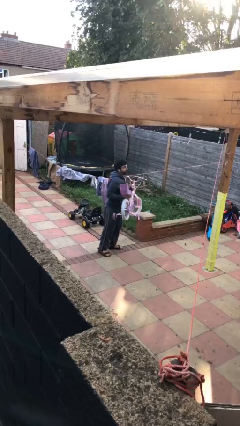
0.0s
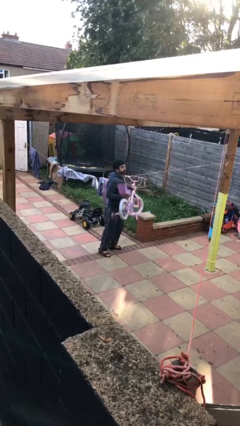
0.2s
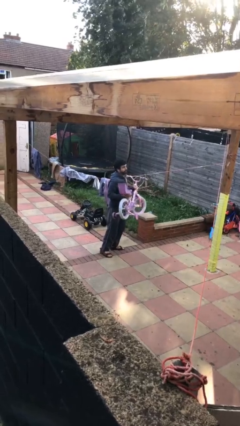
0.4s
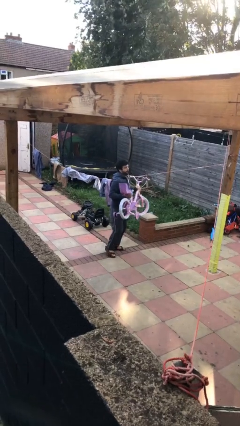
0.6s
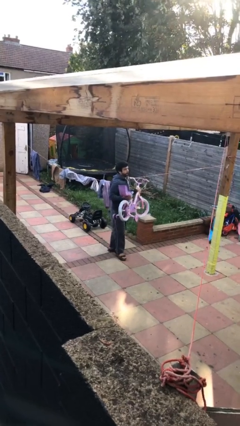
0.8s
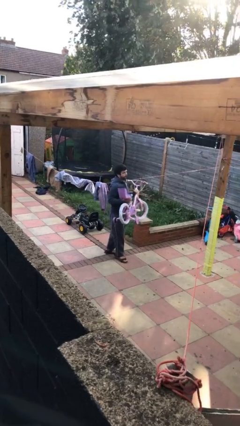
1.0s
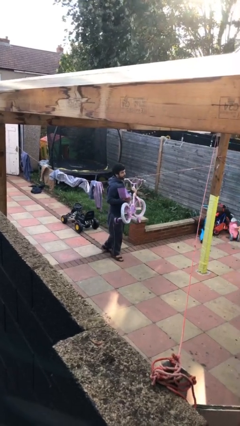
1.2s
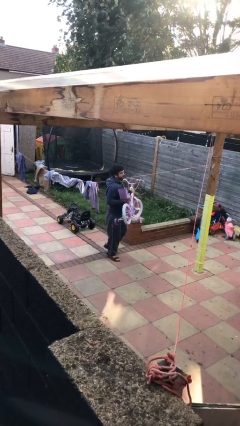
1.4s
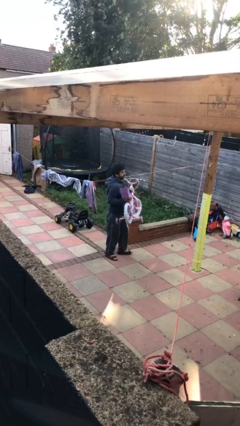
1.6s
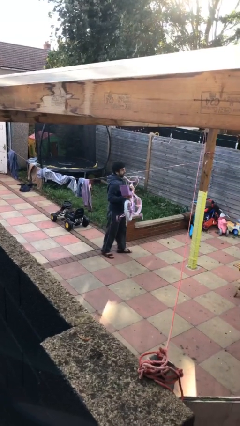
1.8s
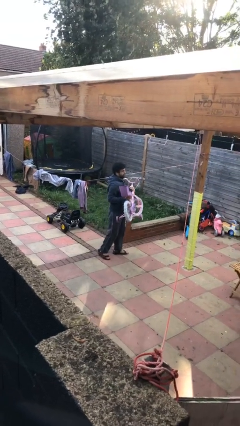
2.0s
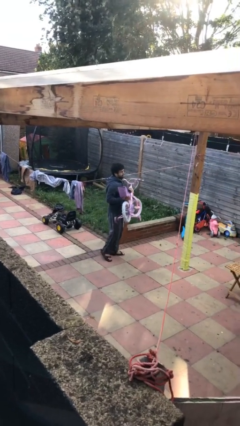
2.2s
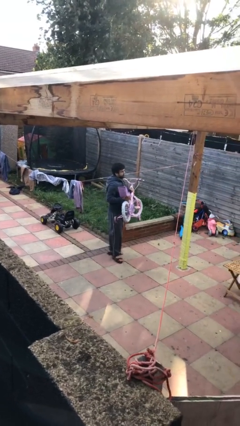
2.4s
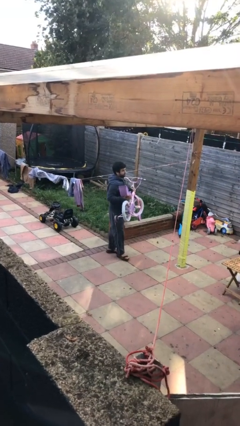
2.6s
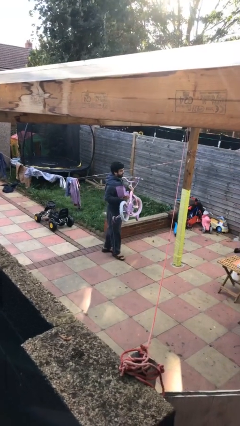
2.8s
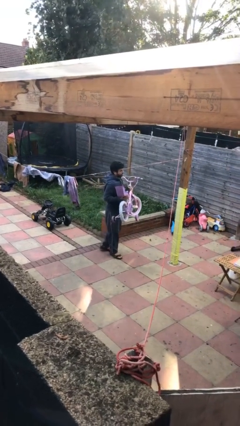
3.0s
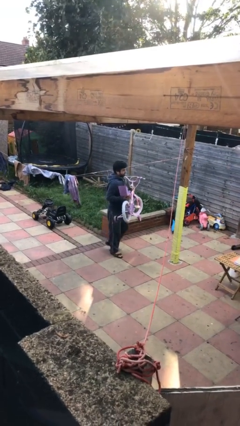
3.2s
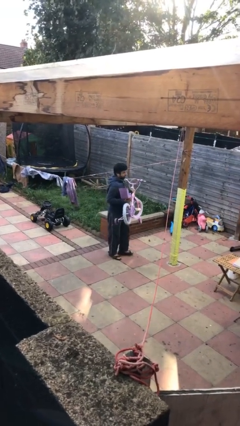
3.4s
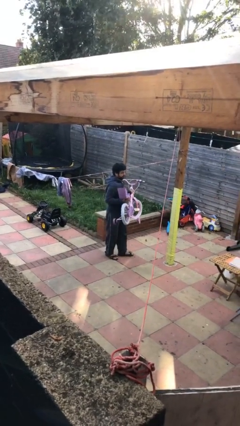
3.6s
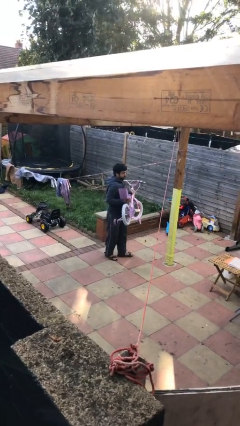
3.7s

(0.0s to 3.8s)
person carries heavy object

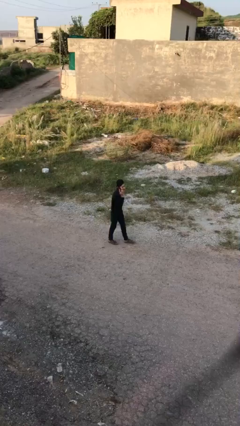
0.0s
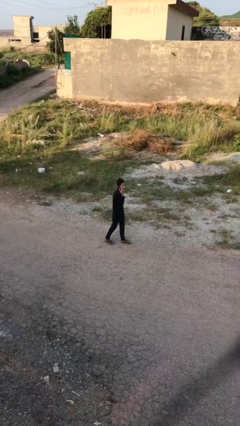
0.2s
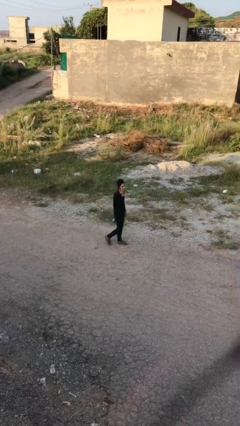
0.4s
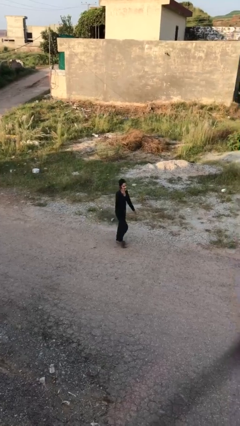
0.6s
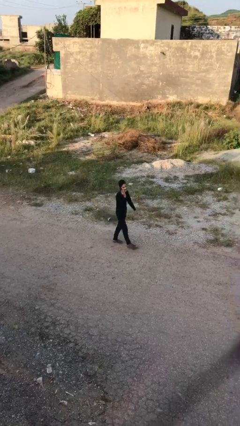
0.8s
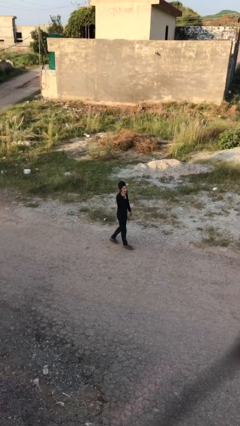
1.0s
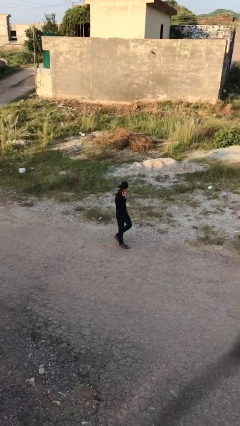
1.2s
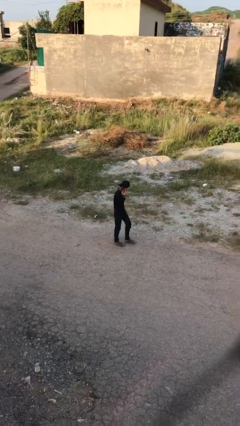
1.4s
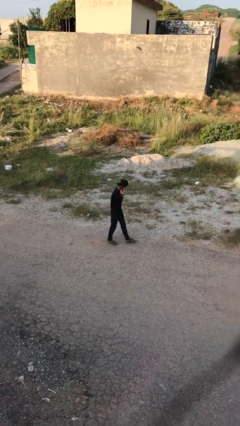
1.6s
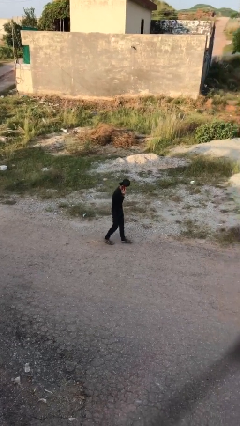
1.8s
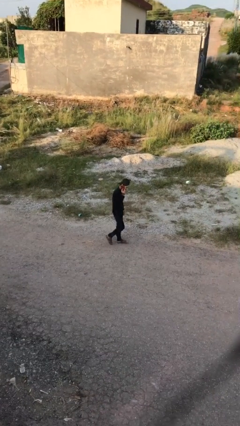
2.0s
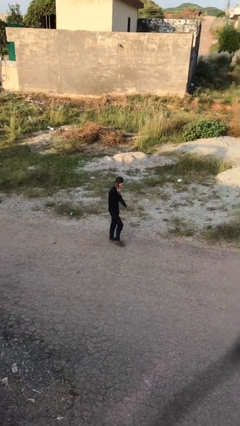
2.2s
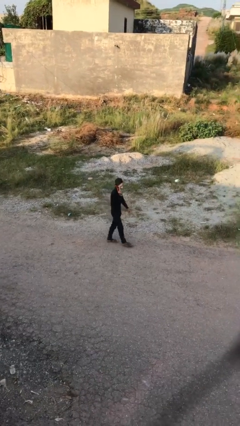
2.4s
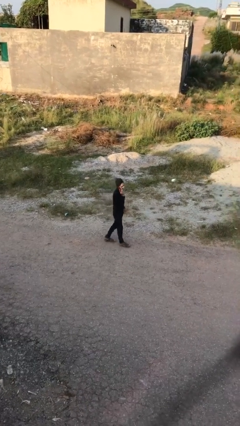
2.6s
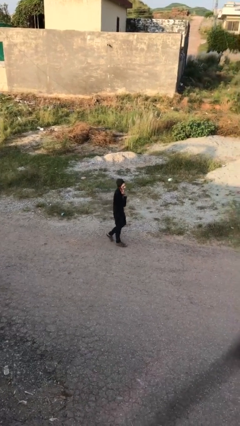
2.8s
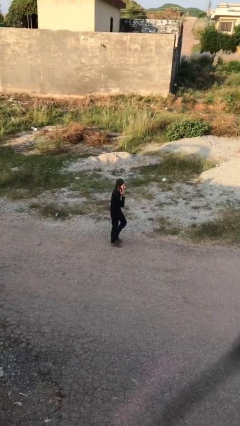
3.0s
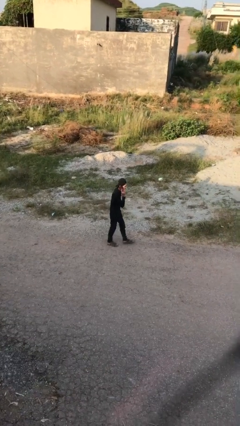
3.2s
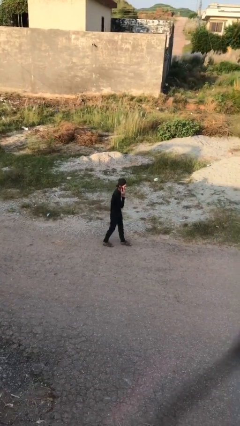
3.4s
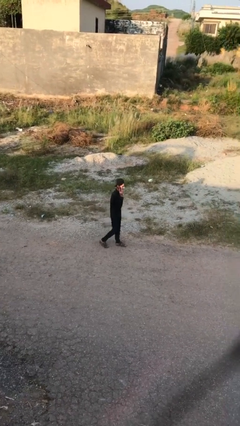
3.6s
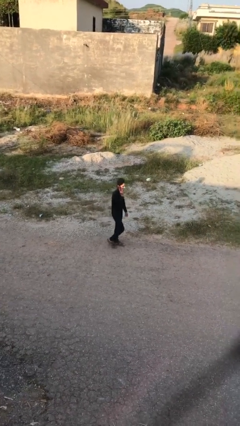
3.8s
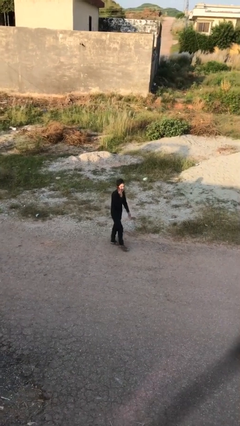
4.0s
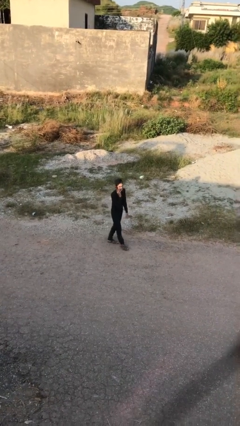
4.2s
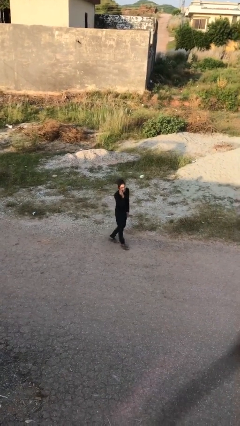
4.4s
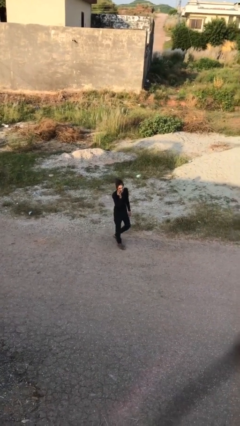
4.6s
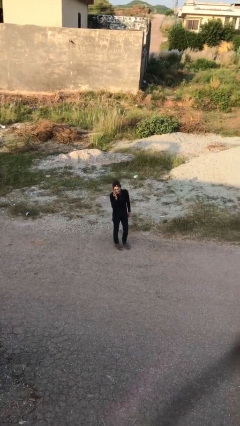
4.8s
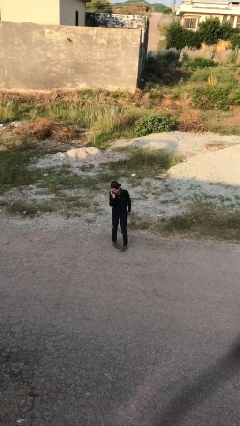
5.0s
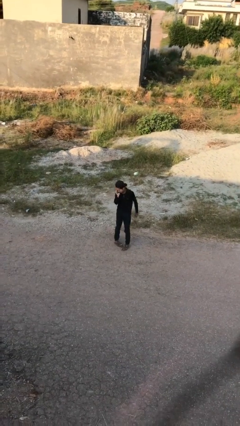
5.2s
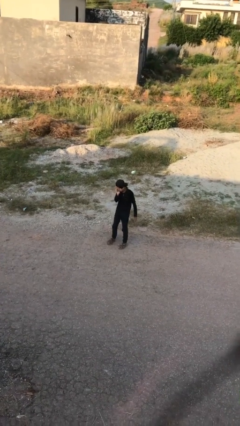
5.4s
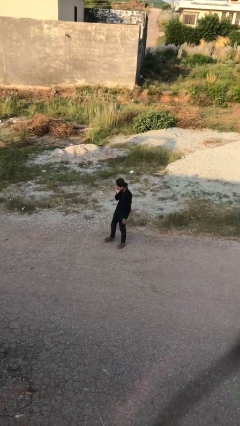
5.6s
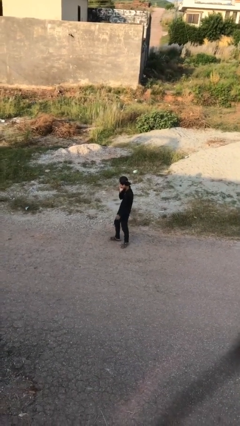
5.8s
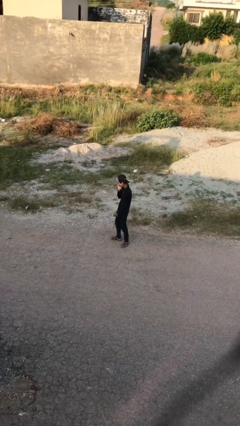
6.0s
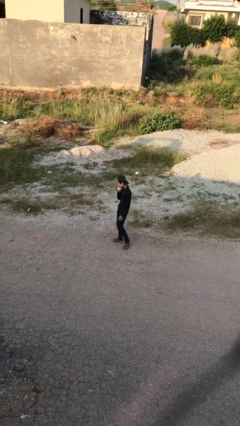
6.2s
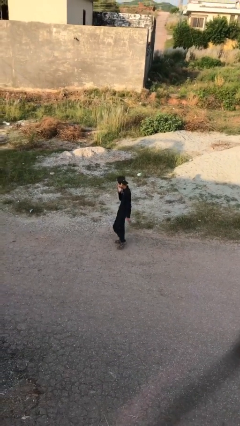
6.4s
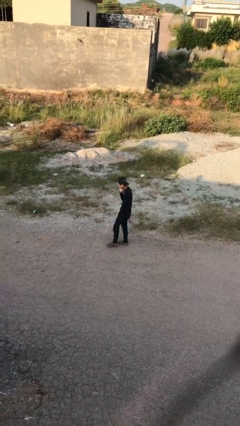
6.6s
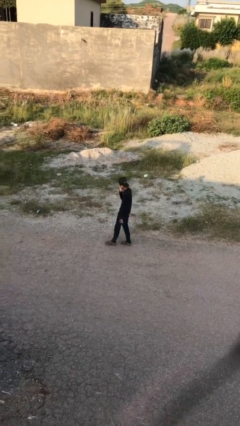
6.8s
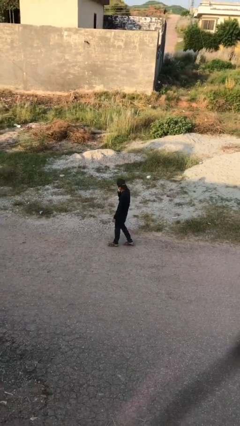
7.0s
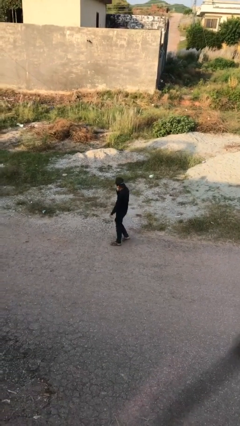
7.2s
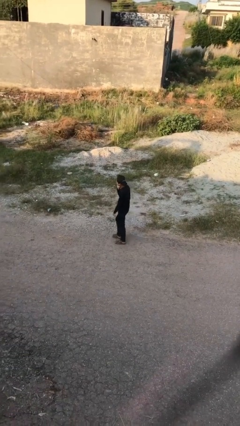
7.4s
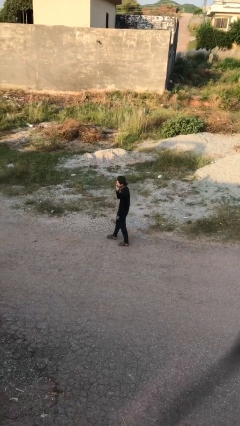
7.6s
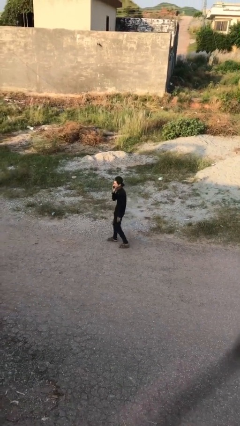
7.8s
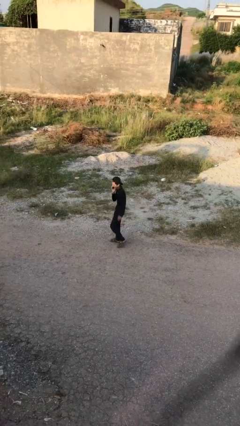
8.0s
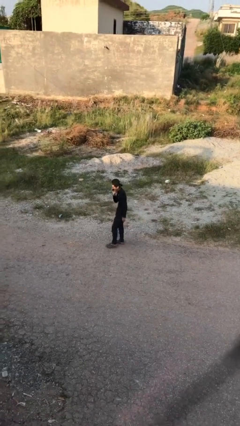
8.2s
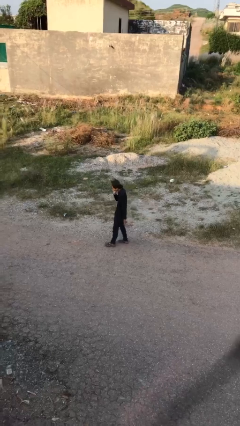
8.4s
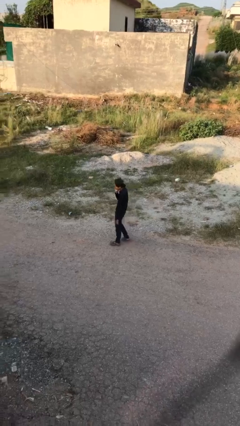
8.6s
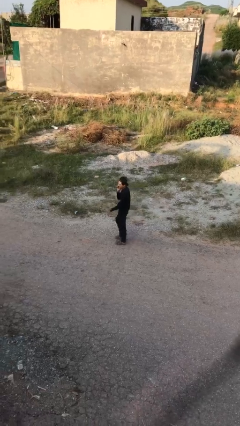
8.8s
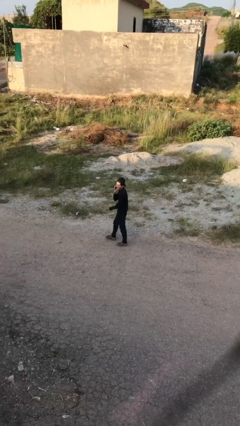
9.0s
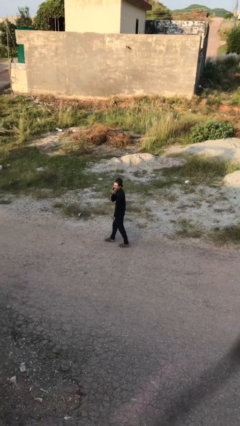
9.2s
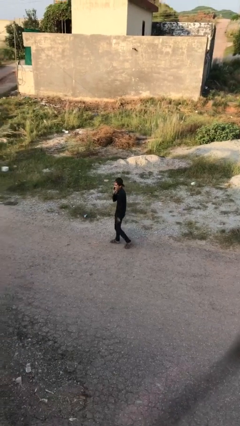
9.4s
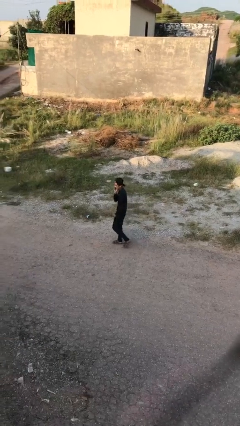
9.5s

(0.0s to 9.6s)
person talks on phone

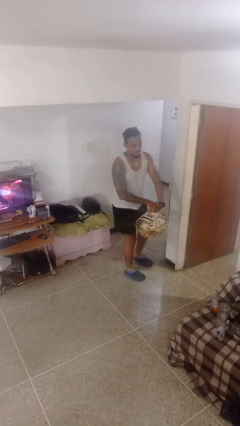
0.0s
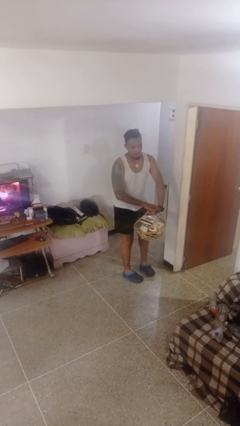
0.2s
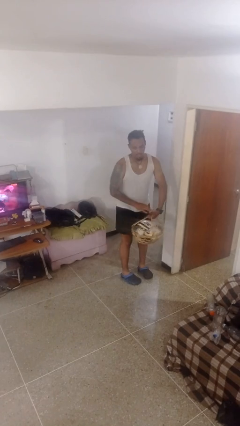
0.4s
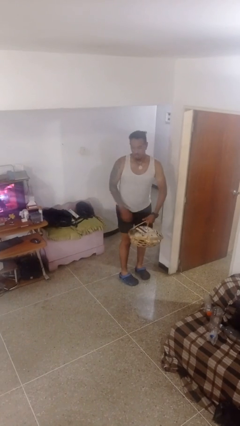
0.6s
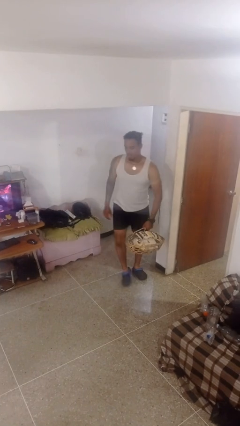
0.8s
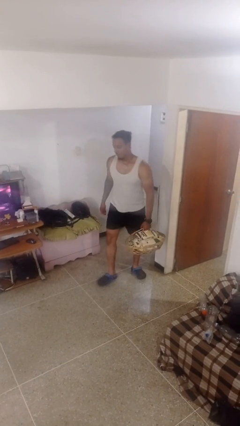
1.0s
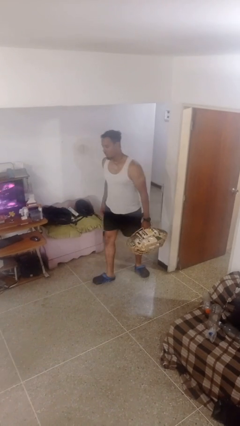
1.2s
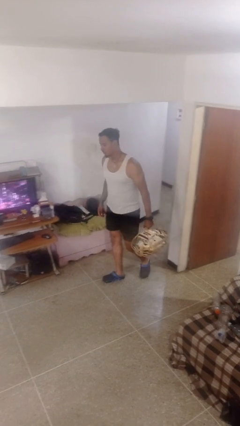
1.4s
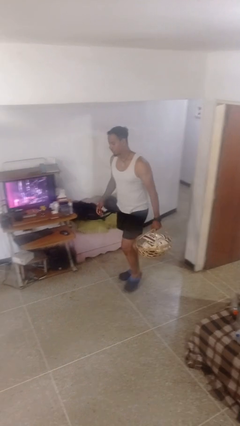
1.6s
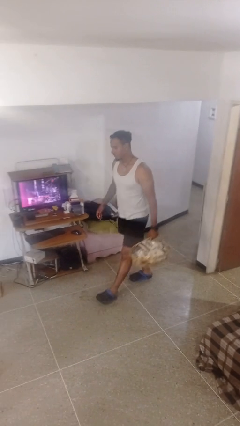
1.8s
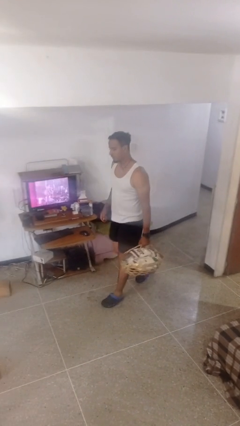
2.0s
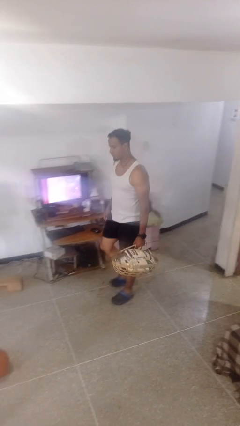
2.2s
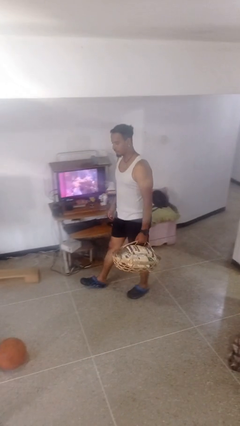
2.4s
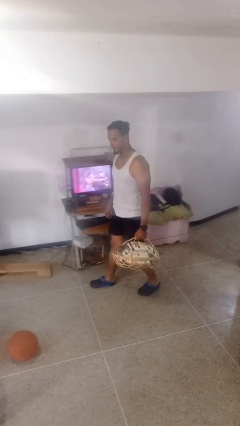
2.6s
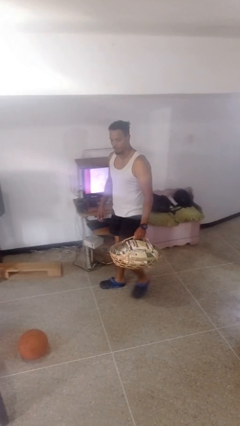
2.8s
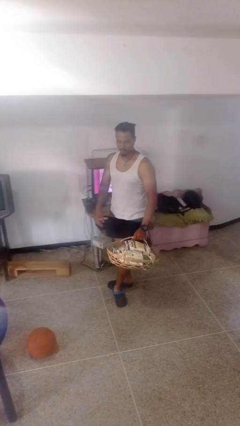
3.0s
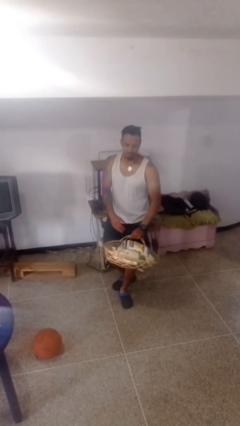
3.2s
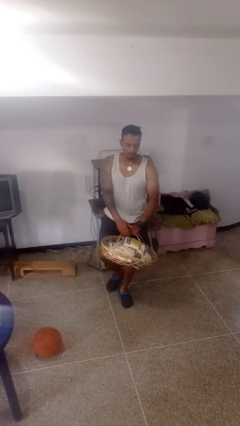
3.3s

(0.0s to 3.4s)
person carries groceries

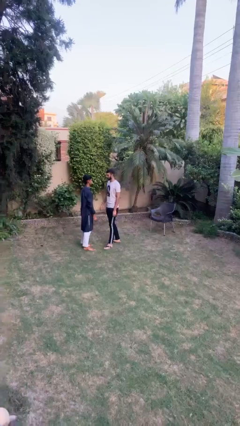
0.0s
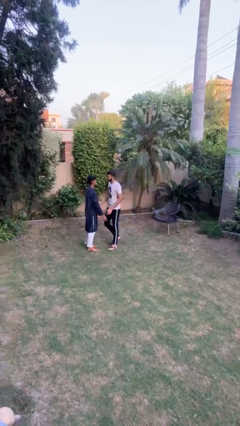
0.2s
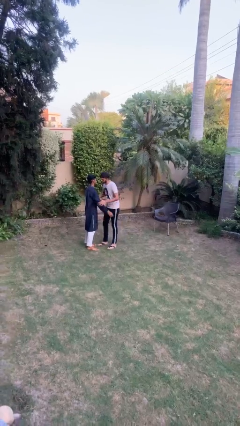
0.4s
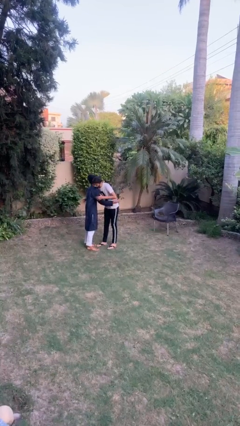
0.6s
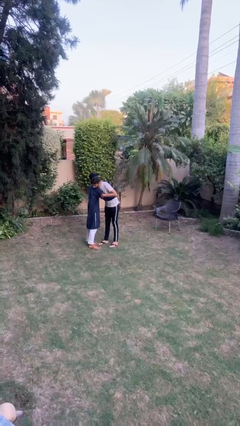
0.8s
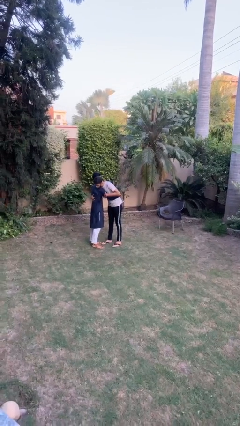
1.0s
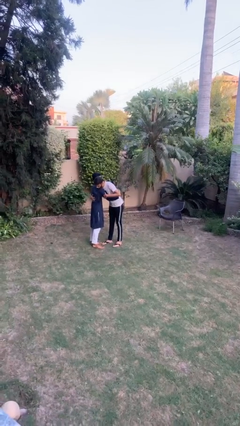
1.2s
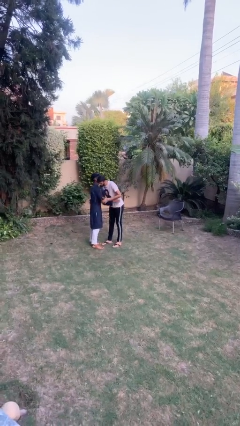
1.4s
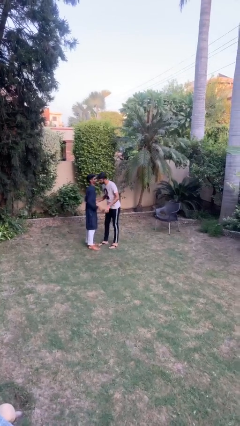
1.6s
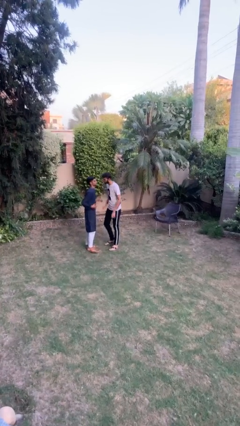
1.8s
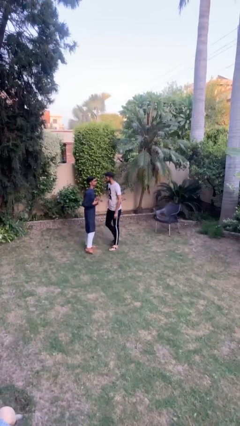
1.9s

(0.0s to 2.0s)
person embraces person
